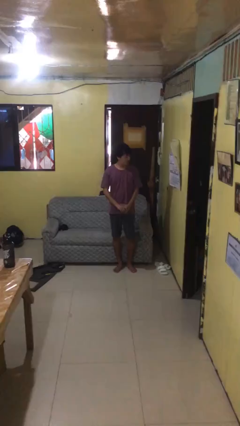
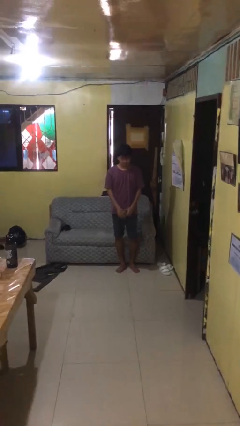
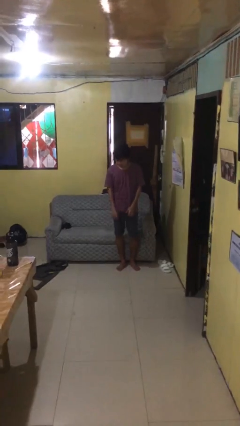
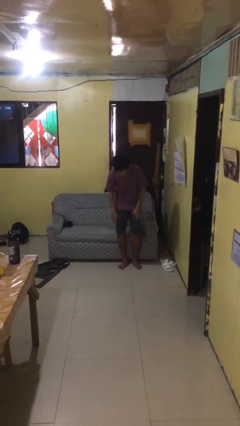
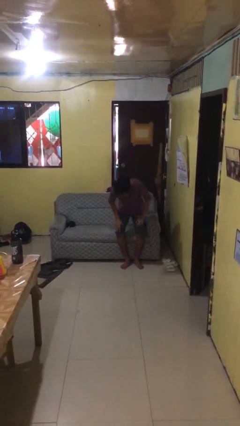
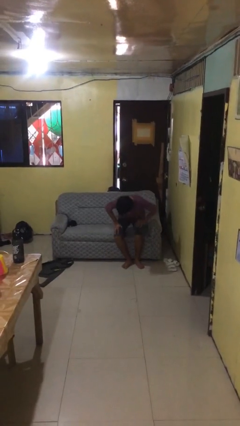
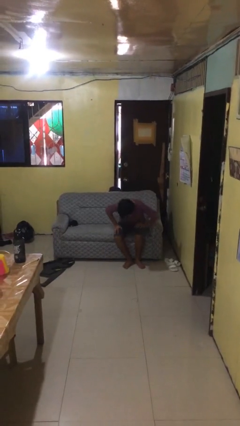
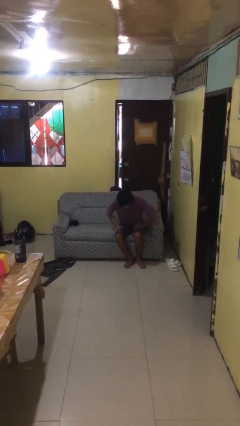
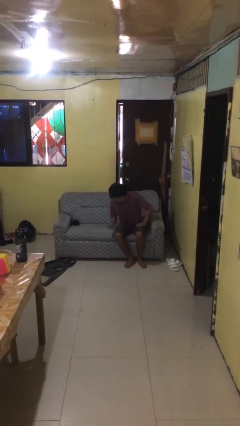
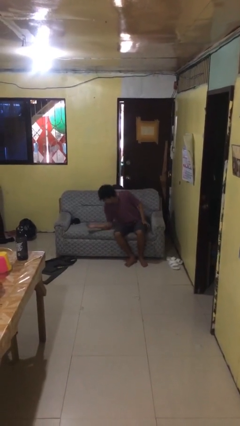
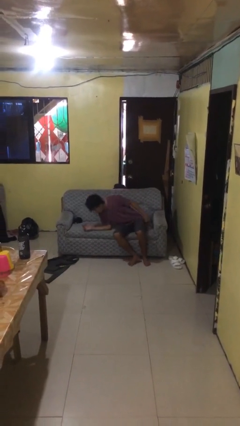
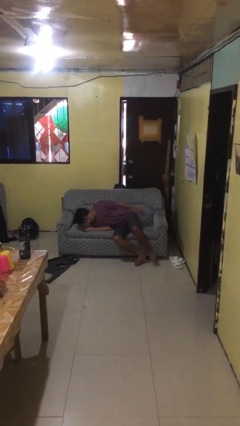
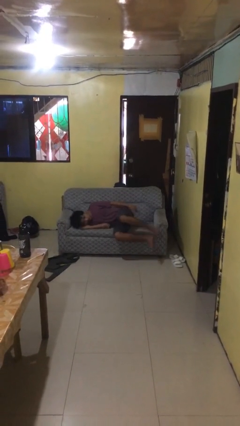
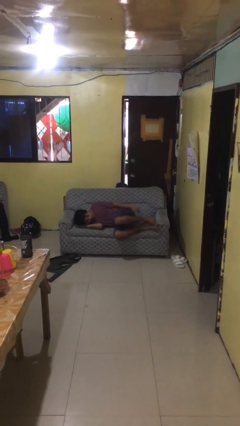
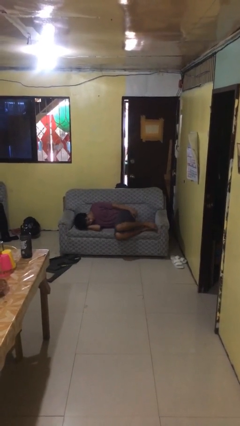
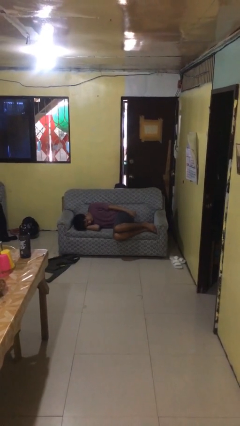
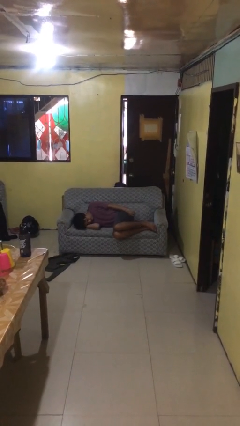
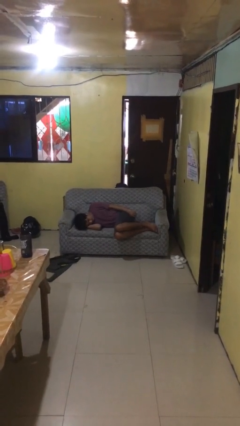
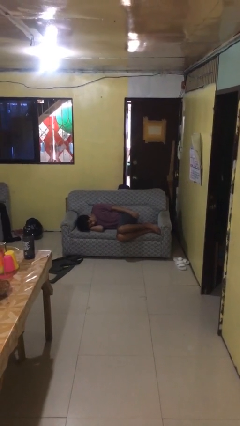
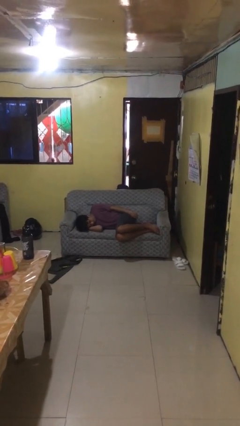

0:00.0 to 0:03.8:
person lies down on couch

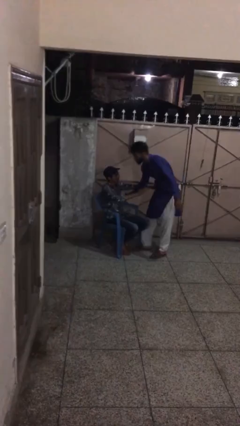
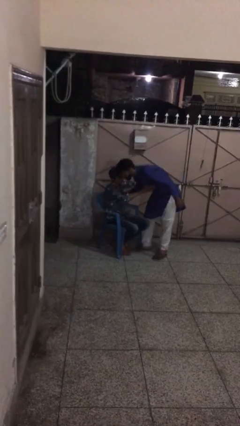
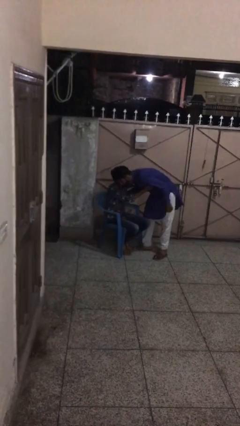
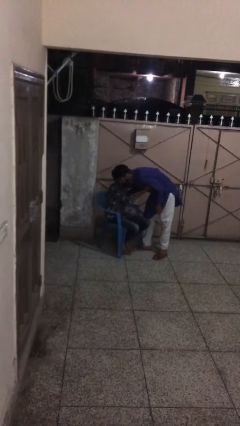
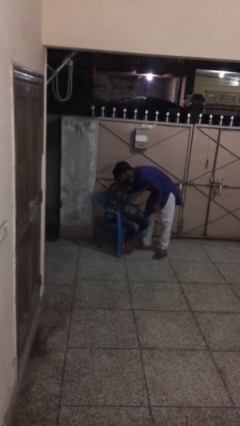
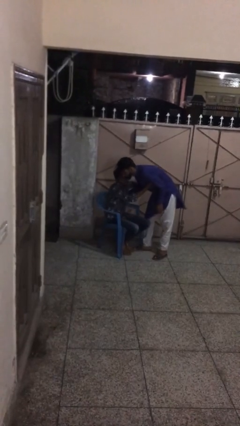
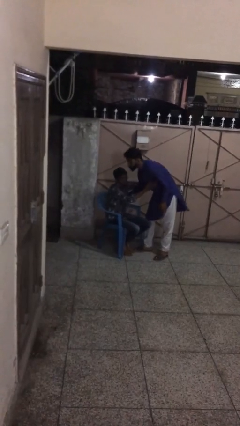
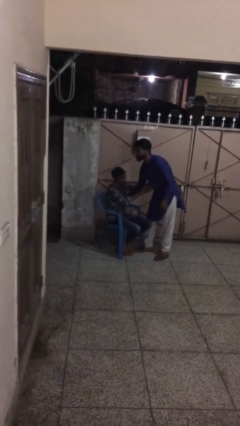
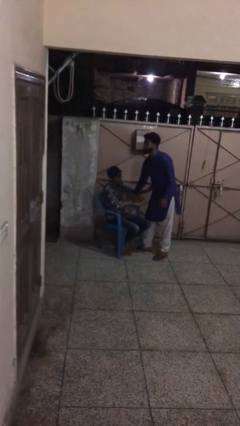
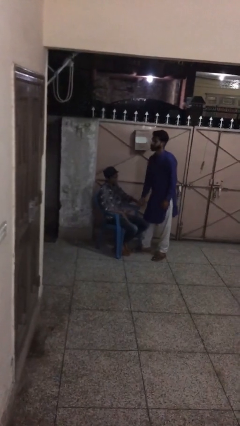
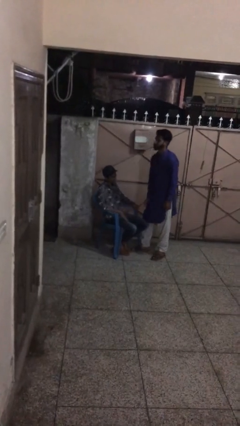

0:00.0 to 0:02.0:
person embraces person

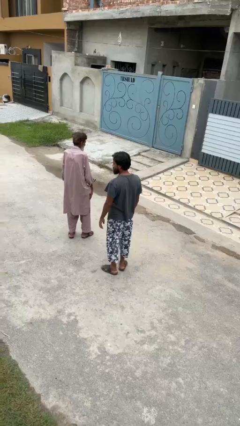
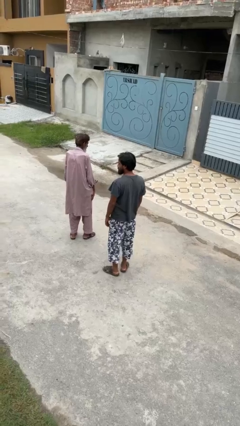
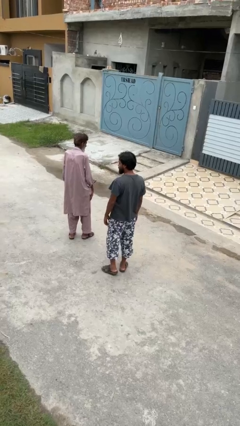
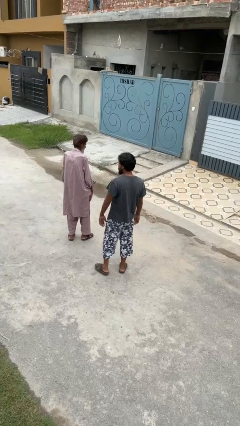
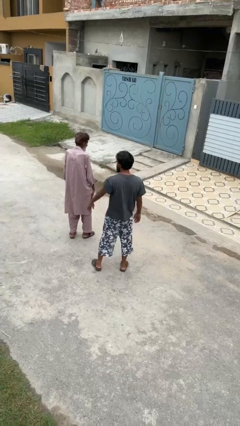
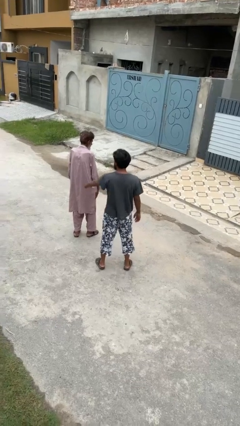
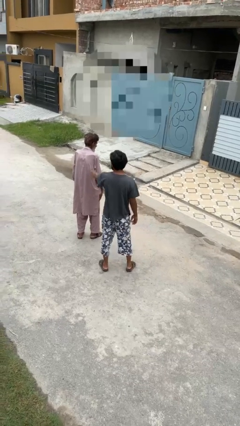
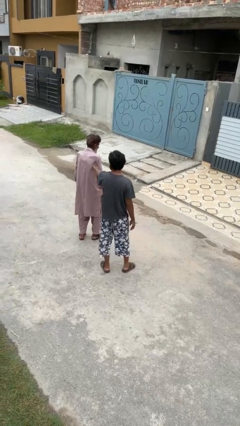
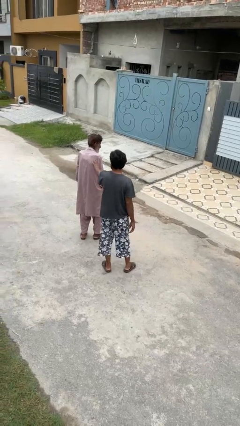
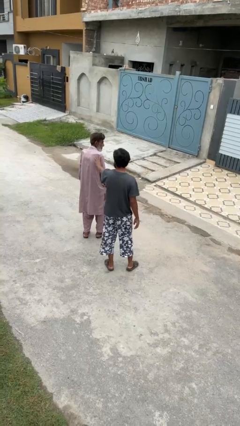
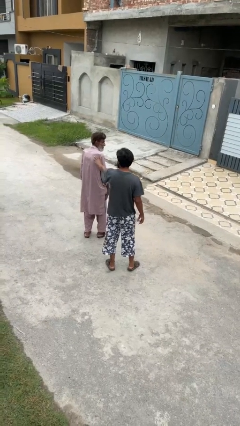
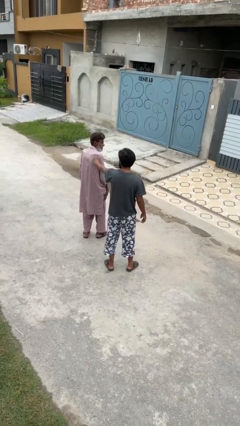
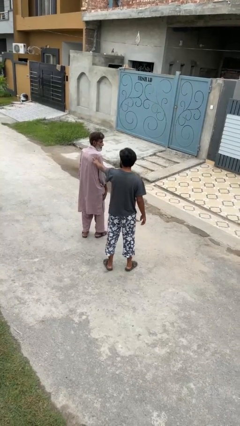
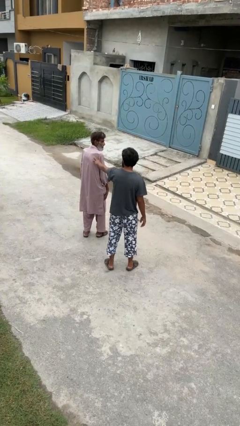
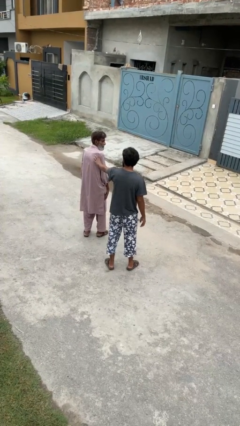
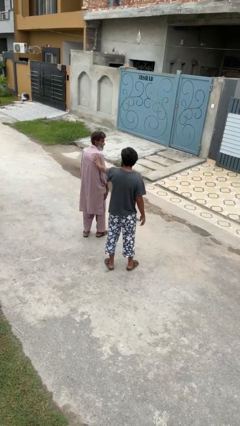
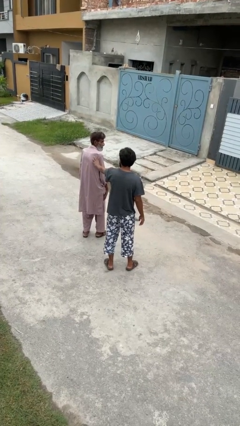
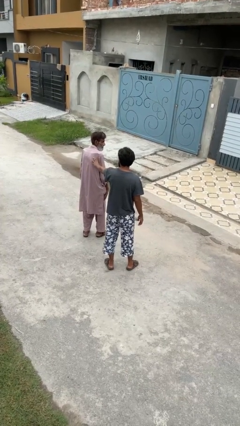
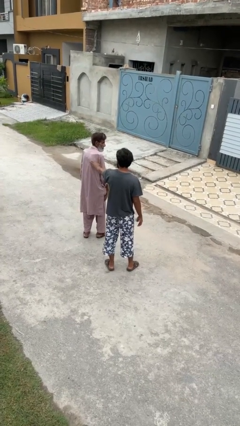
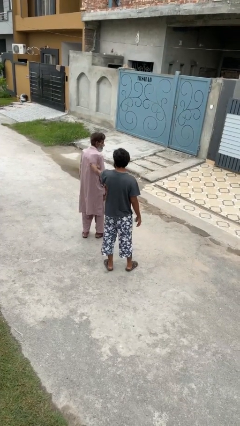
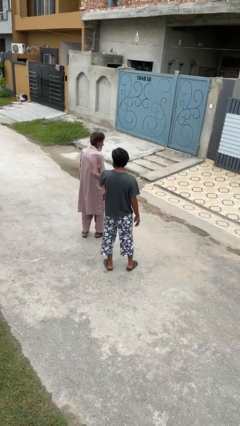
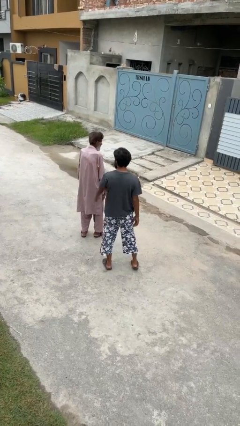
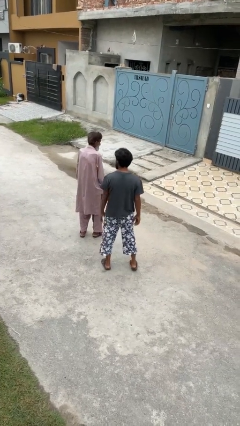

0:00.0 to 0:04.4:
person touches back of person

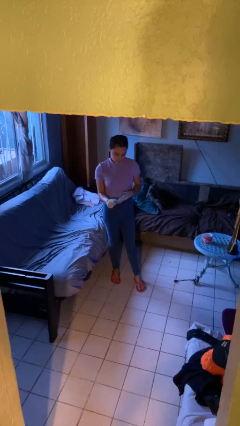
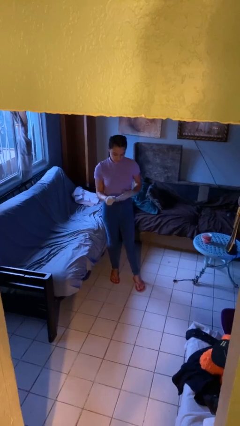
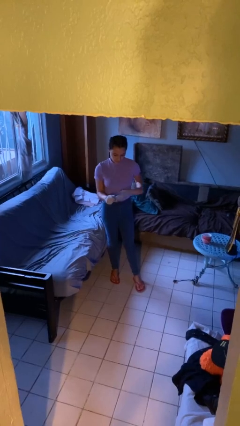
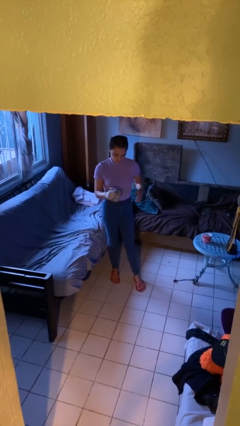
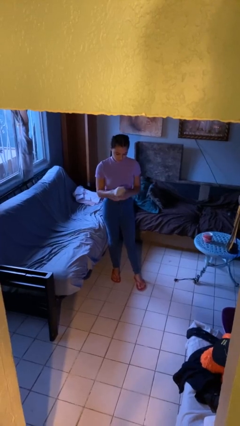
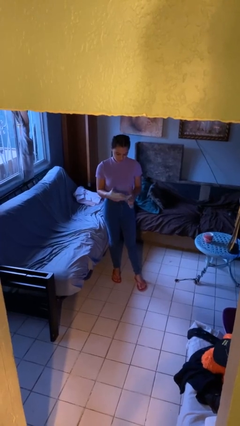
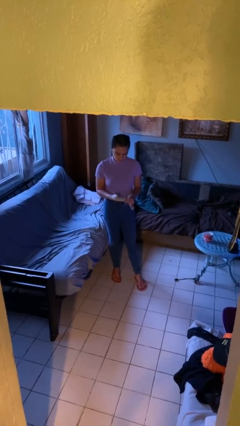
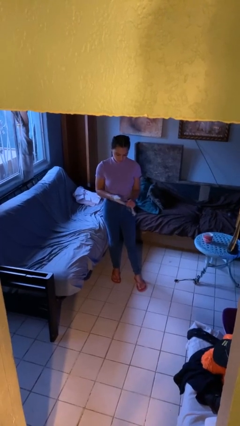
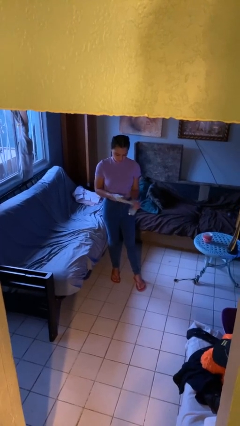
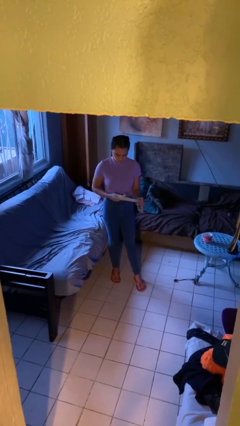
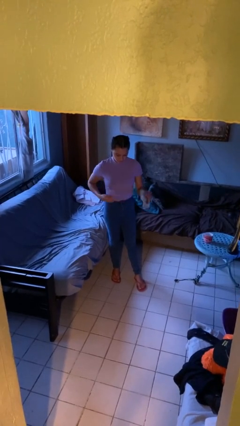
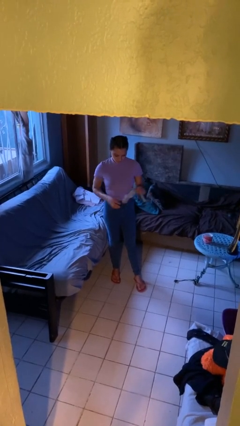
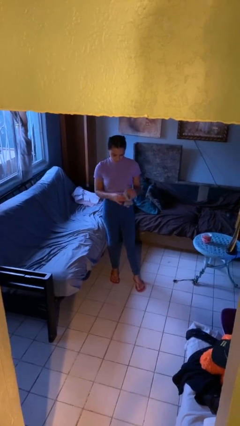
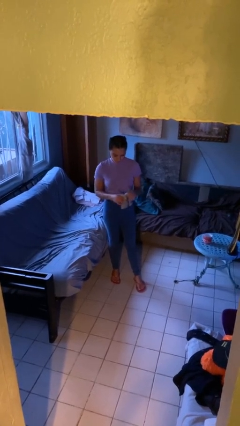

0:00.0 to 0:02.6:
person takes off gloves

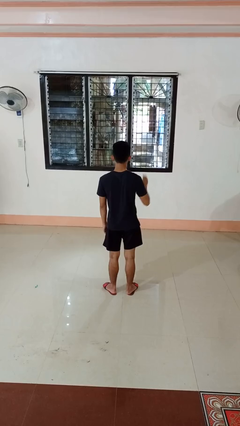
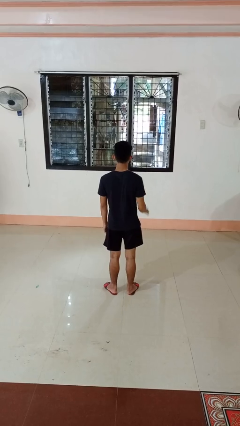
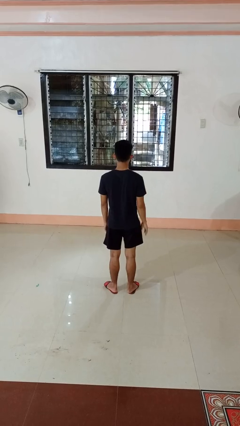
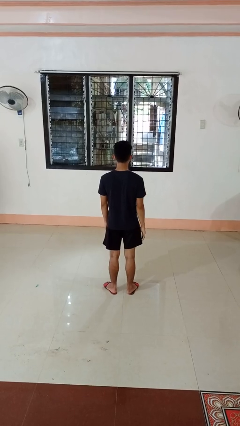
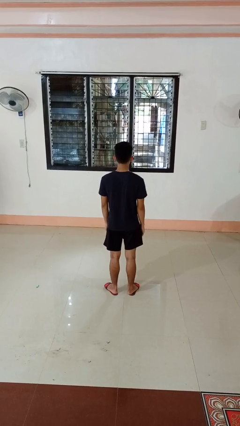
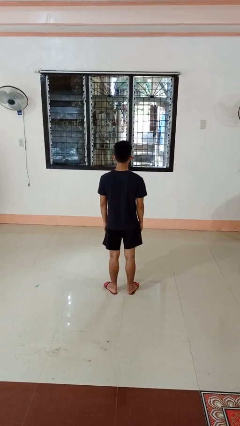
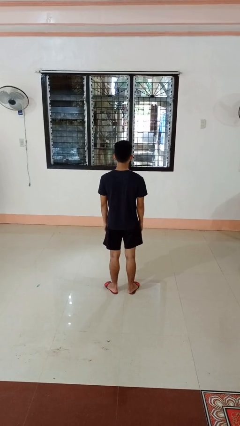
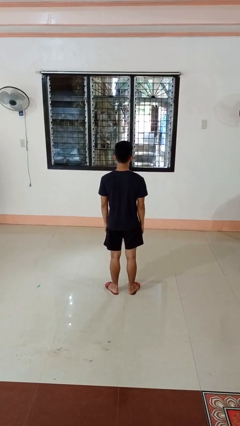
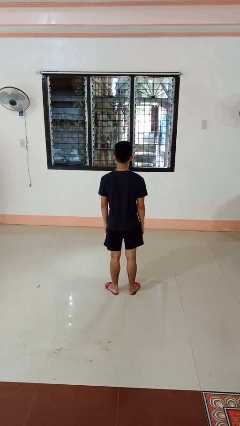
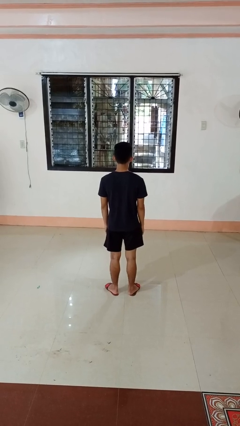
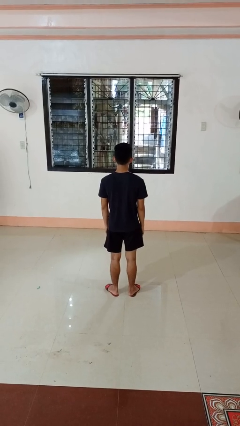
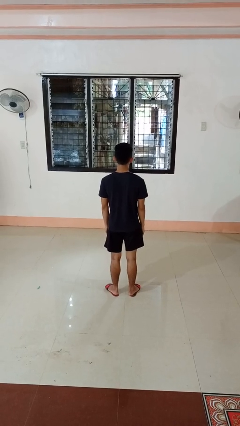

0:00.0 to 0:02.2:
person gestures lower hand

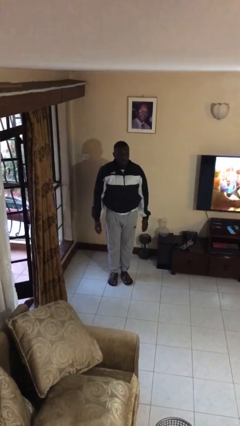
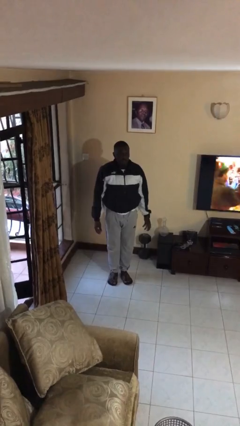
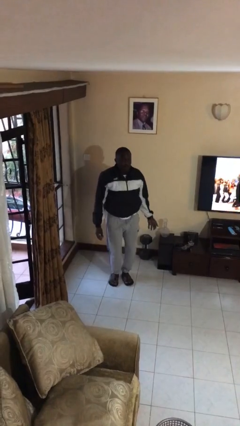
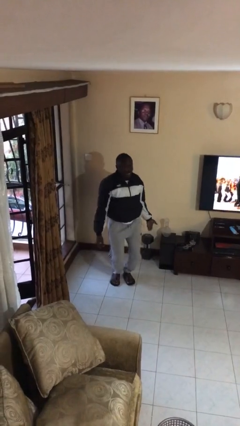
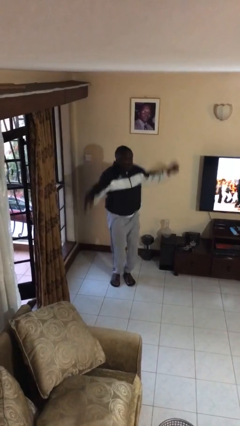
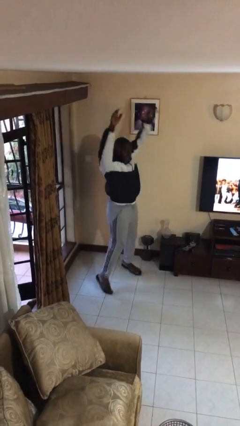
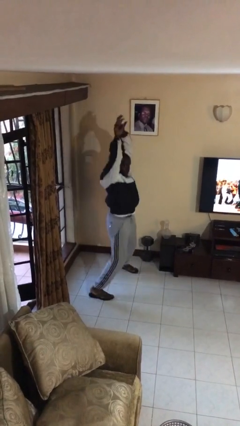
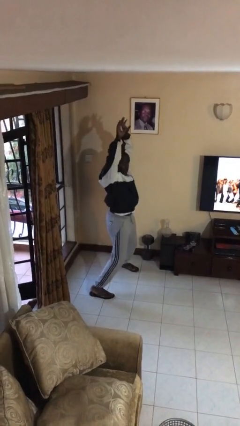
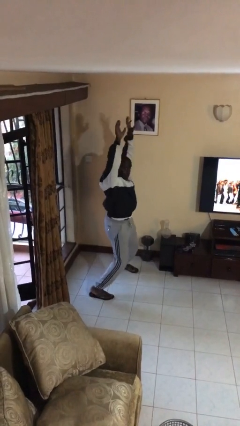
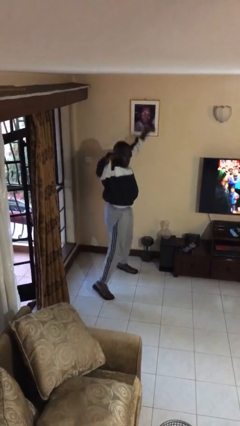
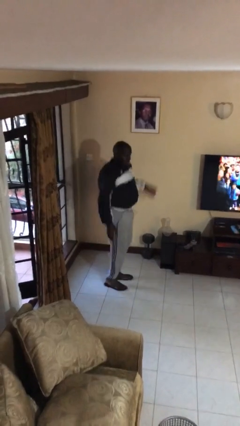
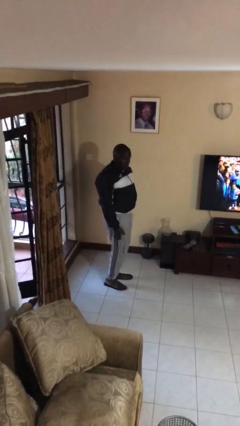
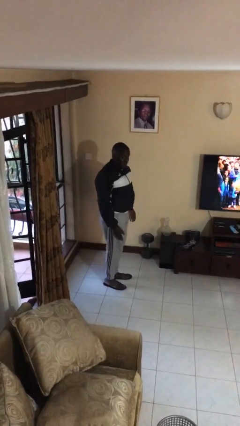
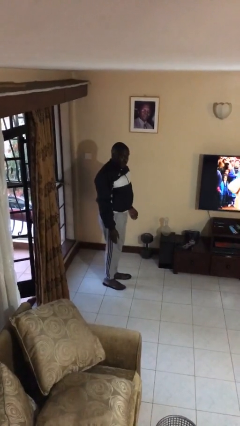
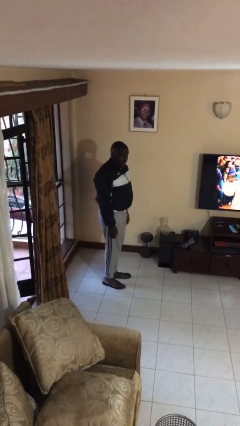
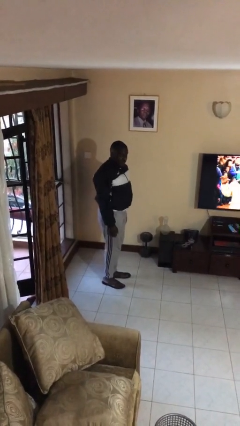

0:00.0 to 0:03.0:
person exercises with jumping jacks
